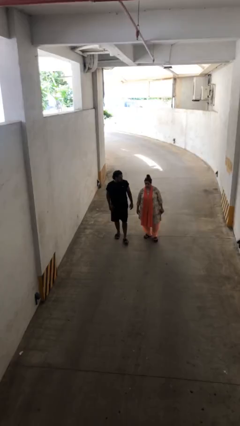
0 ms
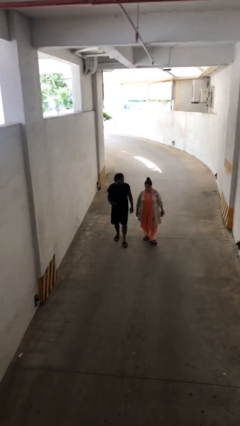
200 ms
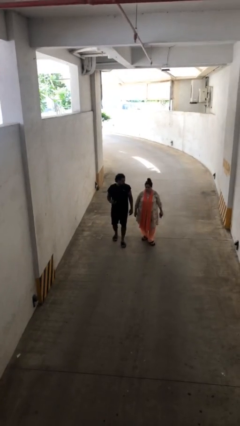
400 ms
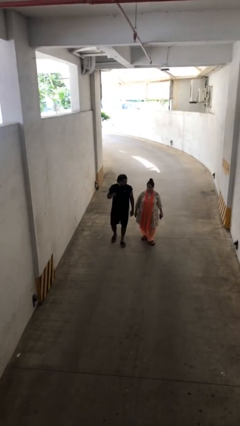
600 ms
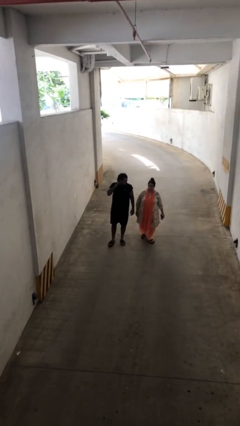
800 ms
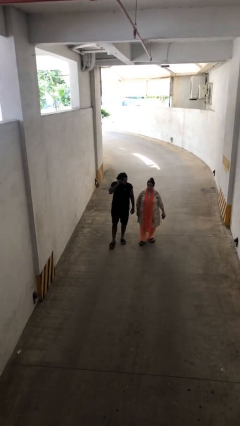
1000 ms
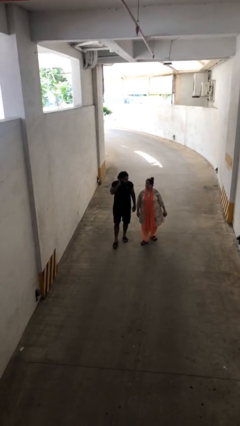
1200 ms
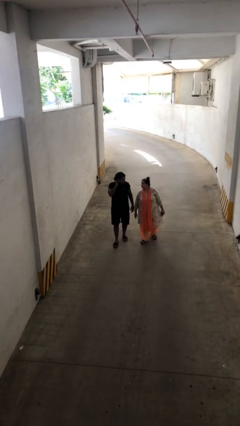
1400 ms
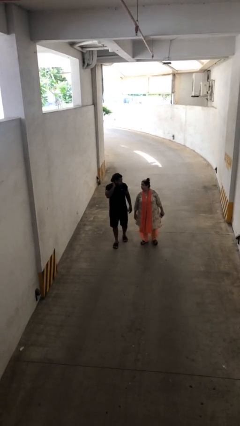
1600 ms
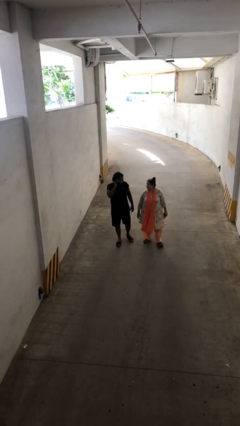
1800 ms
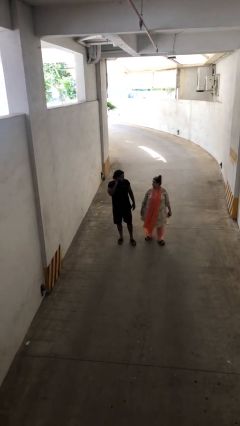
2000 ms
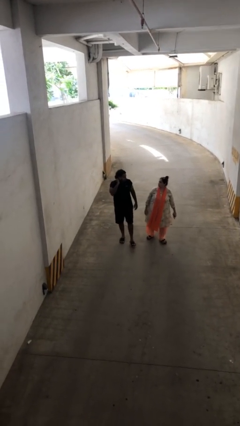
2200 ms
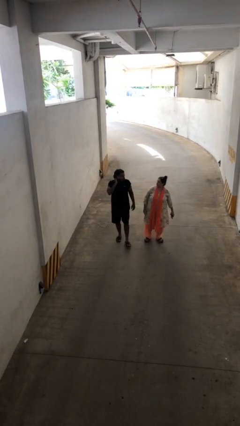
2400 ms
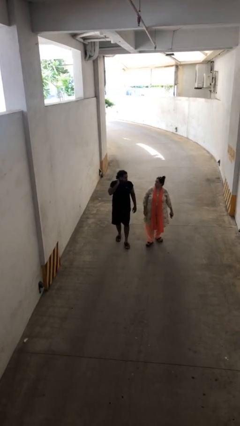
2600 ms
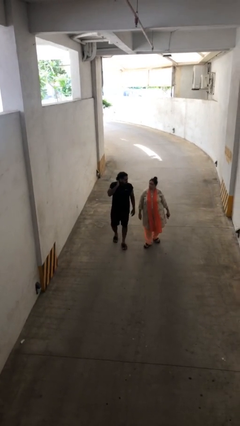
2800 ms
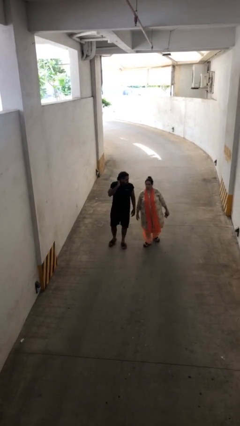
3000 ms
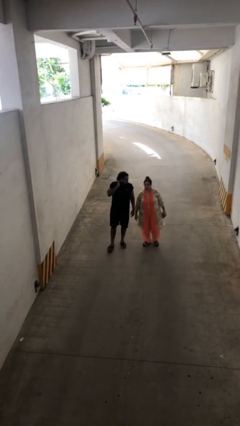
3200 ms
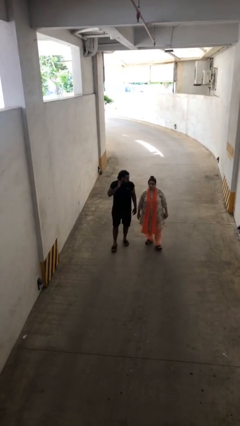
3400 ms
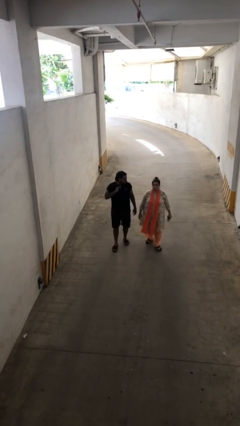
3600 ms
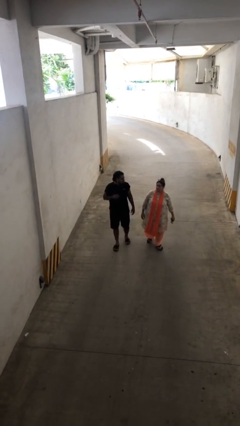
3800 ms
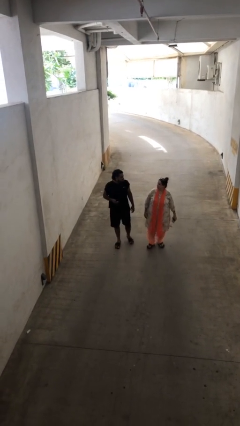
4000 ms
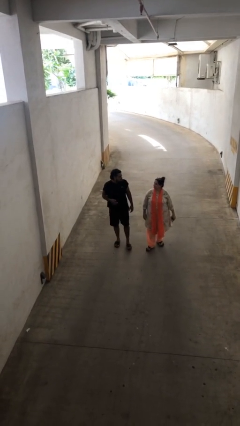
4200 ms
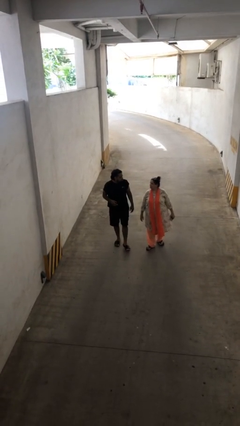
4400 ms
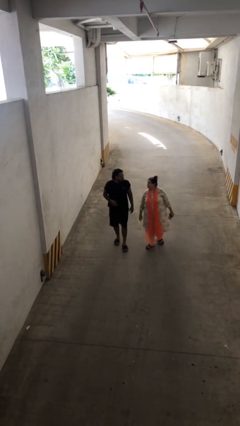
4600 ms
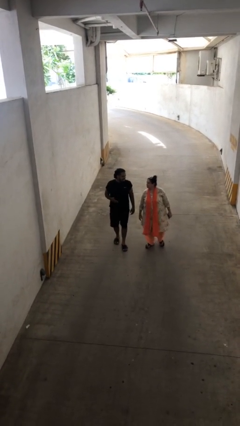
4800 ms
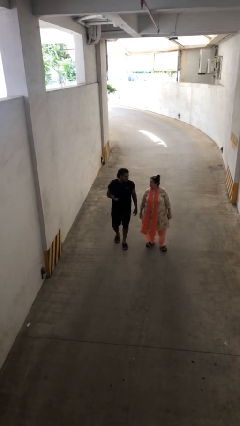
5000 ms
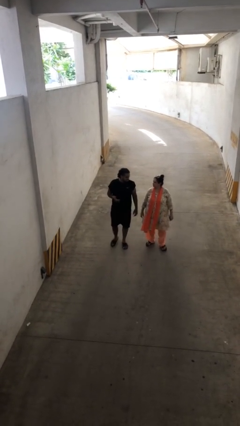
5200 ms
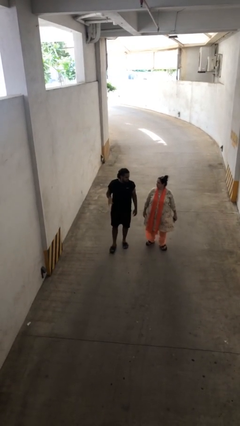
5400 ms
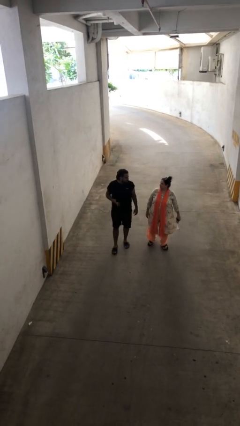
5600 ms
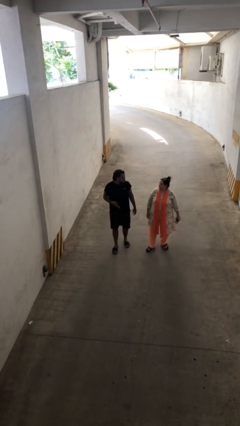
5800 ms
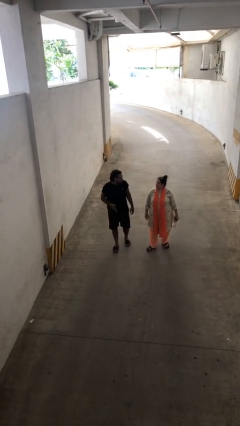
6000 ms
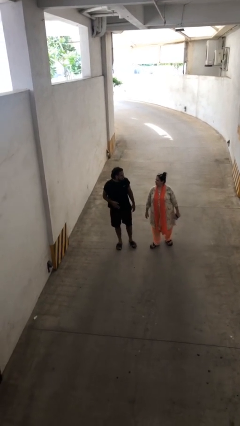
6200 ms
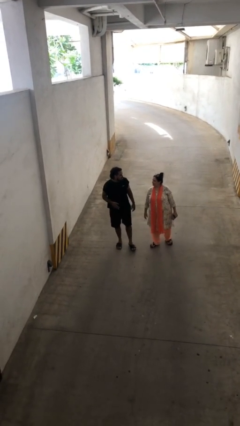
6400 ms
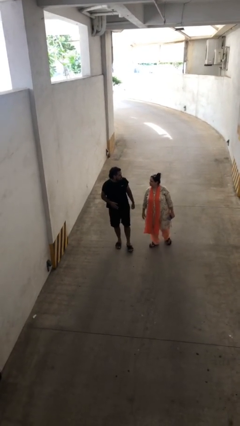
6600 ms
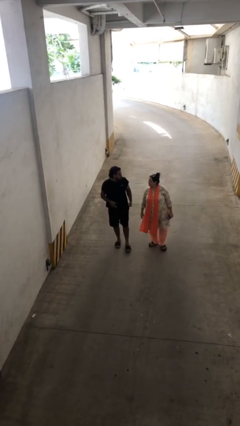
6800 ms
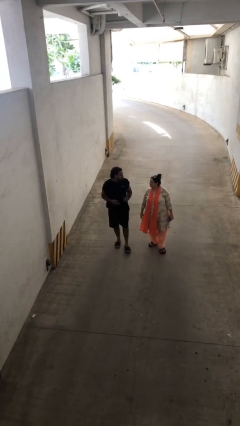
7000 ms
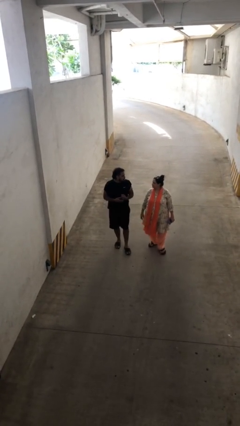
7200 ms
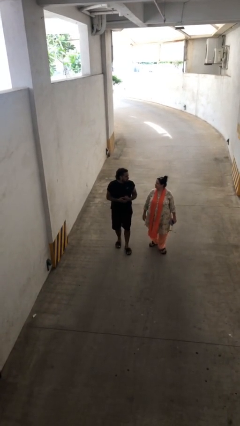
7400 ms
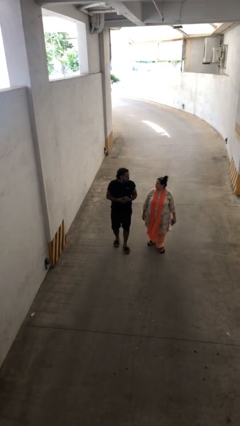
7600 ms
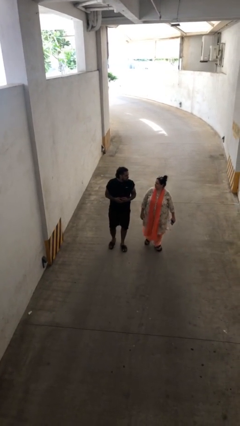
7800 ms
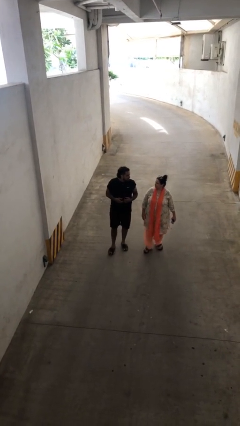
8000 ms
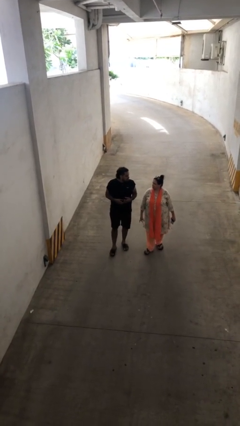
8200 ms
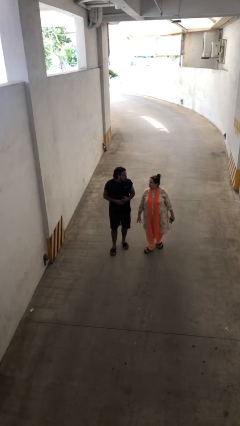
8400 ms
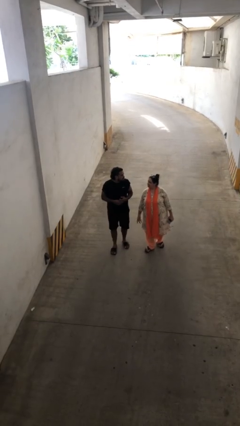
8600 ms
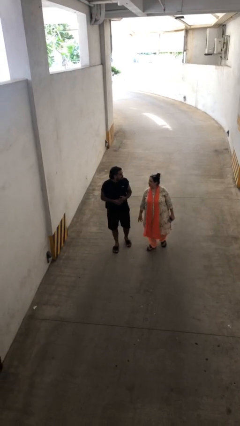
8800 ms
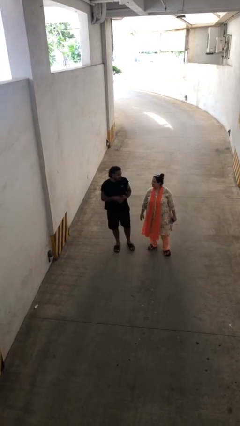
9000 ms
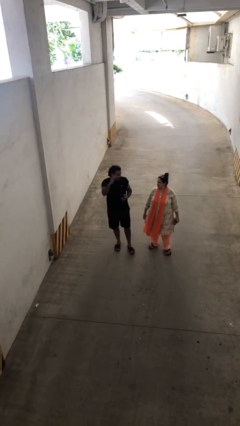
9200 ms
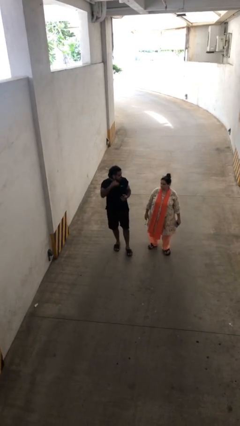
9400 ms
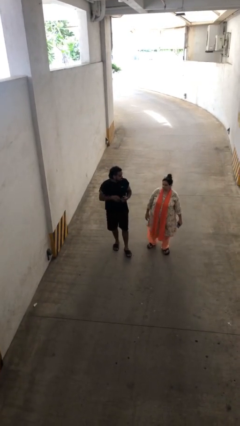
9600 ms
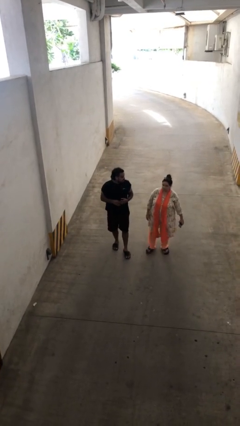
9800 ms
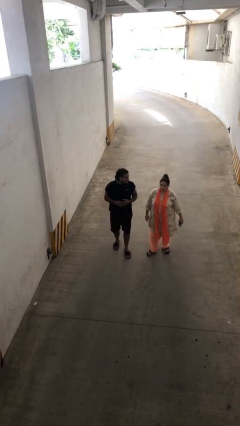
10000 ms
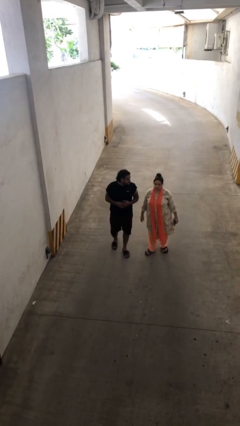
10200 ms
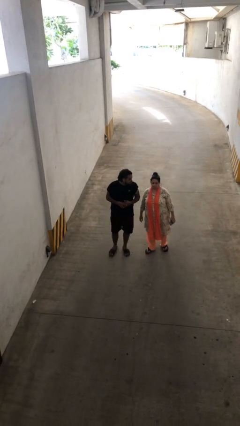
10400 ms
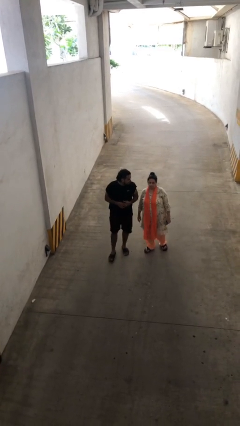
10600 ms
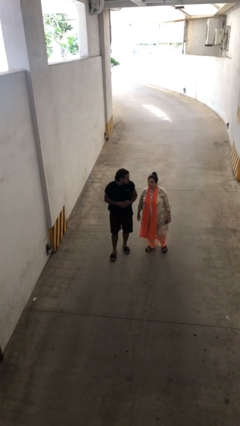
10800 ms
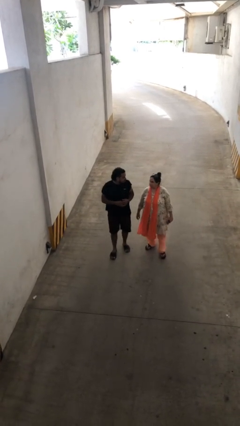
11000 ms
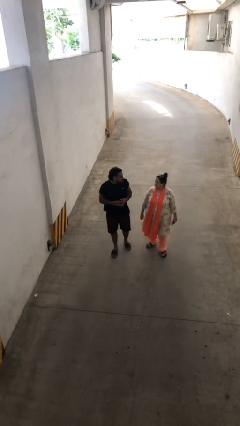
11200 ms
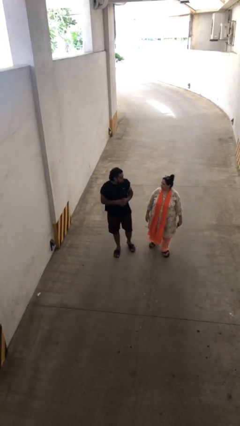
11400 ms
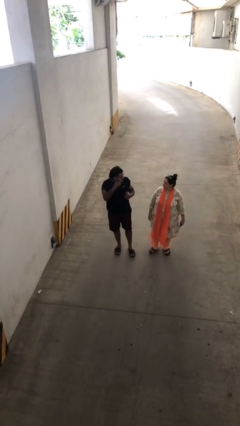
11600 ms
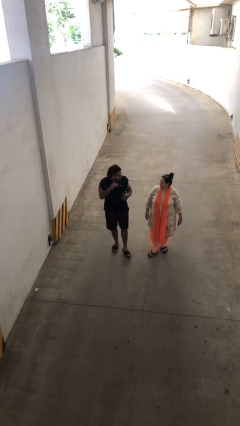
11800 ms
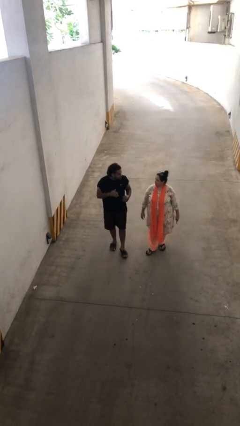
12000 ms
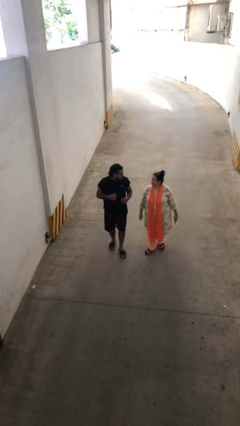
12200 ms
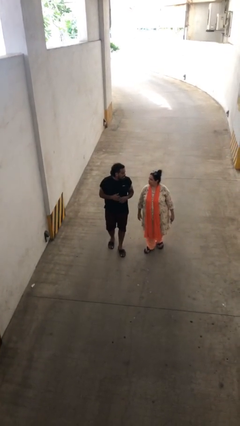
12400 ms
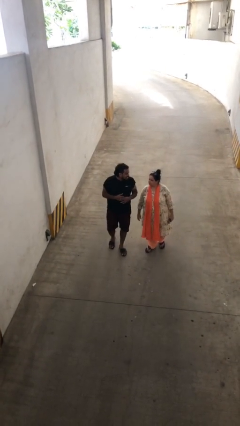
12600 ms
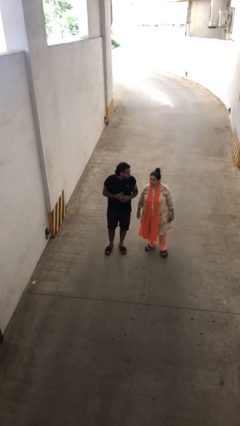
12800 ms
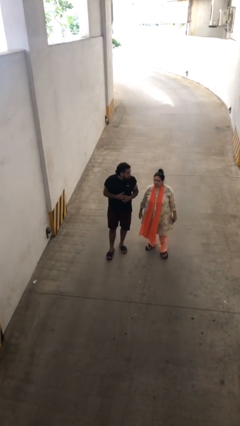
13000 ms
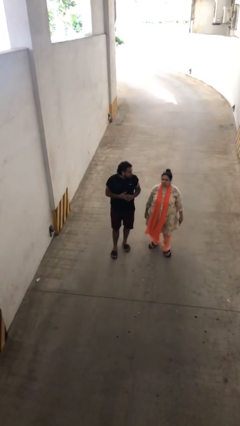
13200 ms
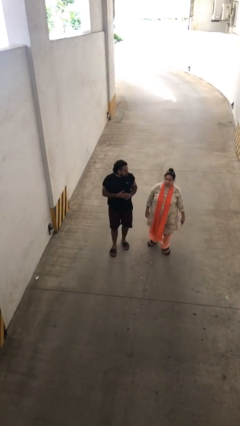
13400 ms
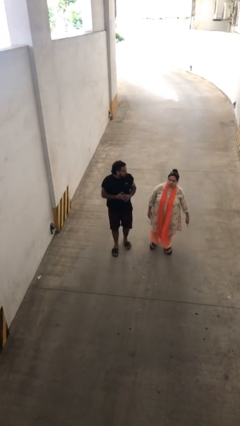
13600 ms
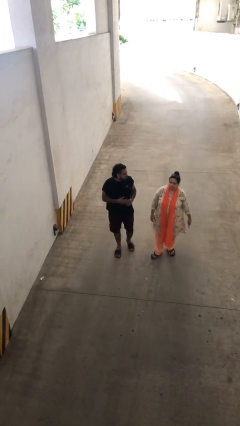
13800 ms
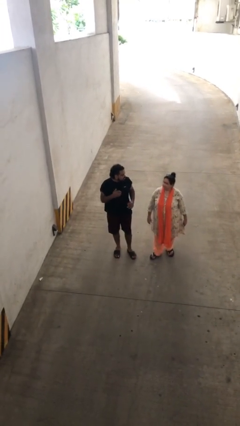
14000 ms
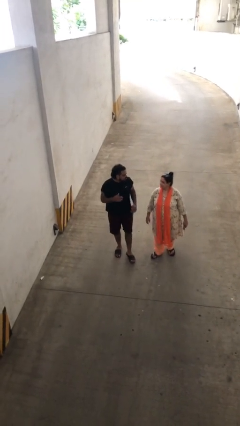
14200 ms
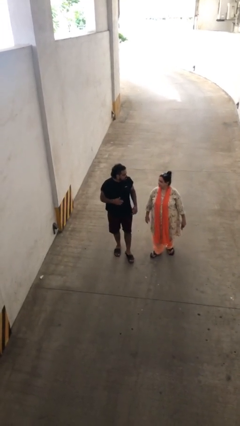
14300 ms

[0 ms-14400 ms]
person talks to person

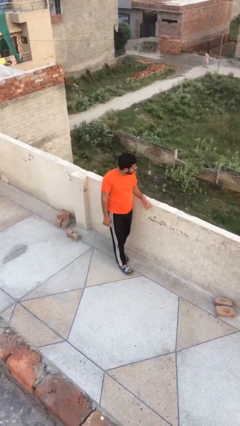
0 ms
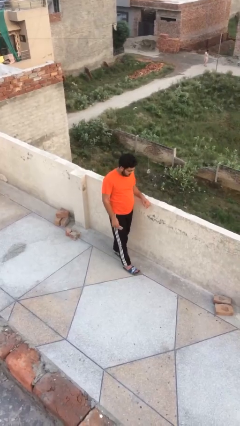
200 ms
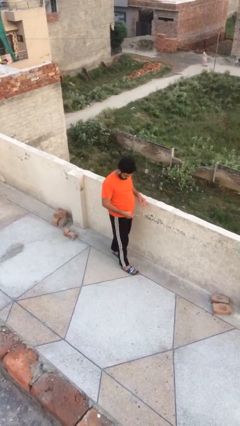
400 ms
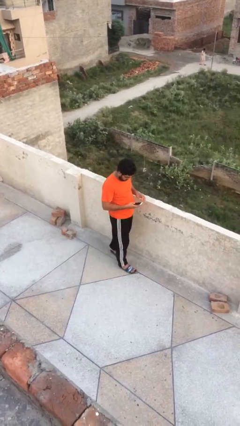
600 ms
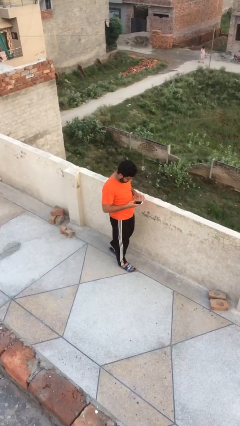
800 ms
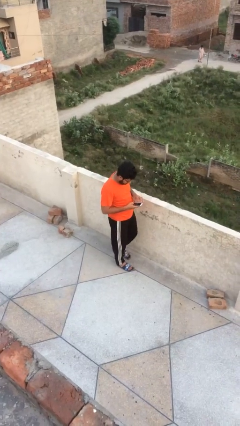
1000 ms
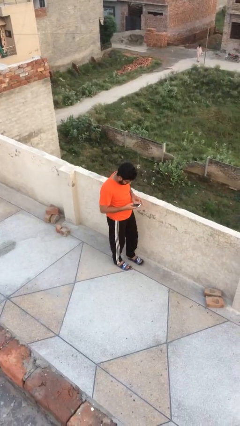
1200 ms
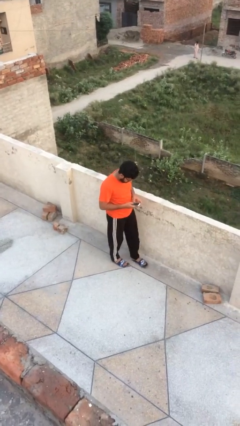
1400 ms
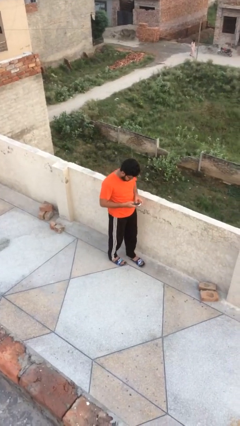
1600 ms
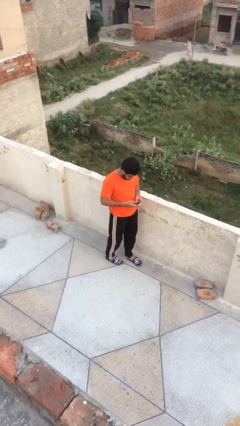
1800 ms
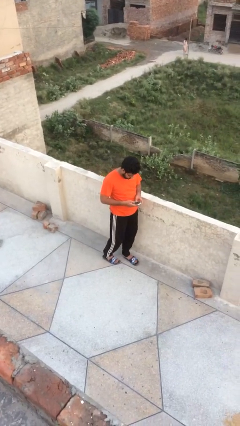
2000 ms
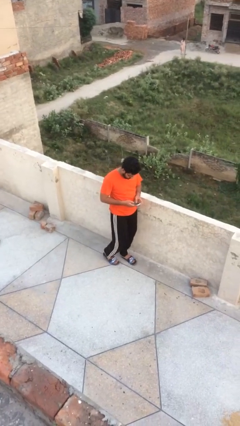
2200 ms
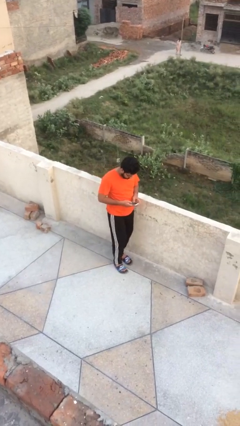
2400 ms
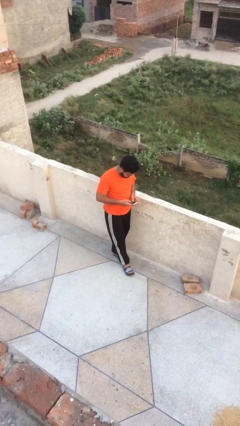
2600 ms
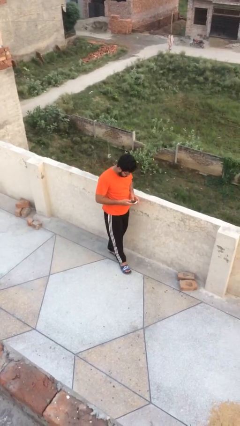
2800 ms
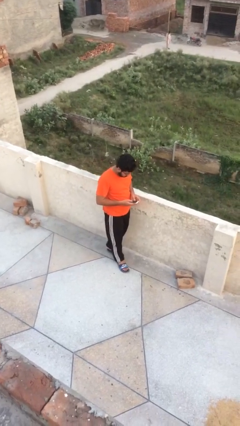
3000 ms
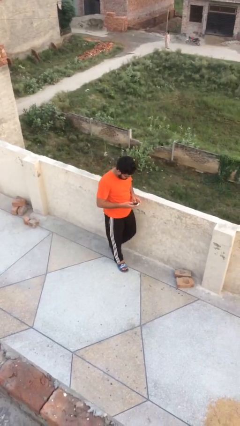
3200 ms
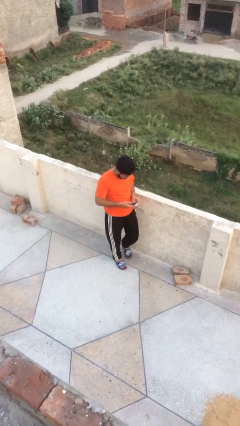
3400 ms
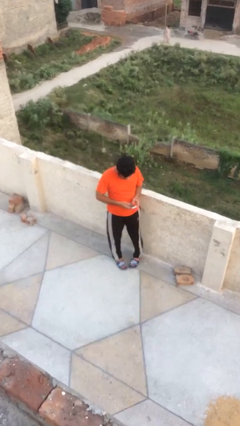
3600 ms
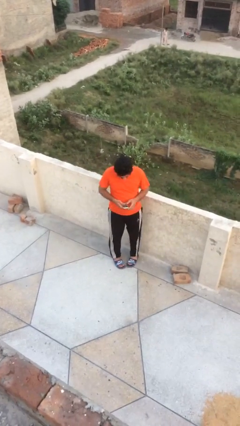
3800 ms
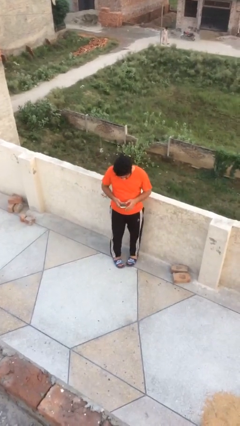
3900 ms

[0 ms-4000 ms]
person texts on phone

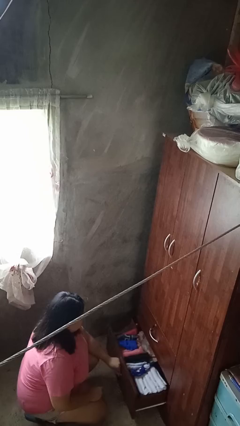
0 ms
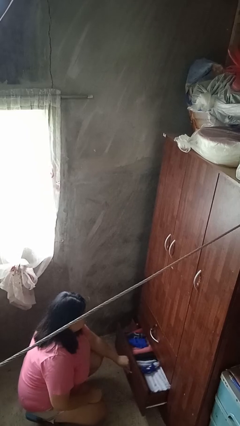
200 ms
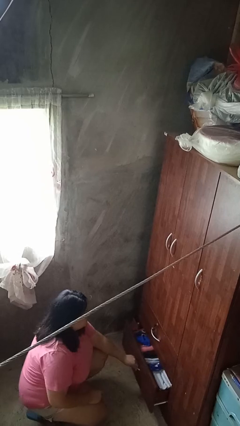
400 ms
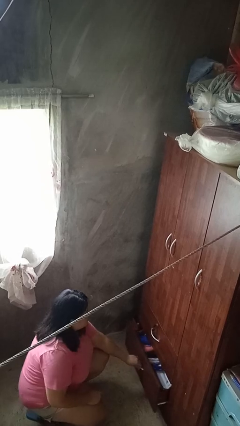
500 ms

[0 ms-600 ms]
person closes dresser drawer
